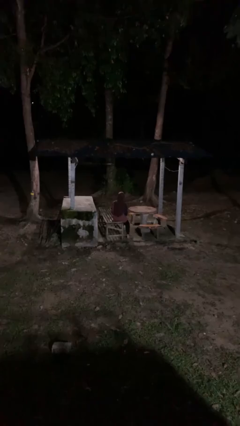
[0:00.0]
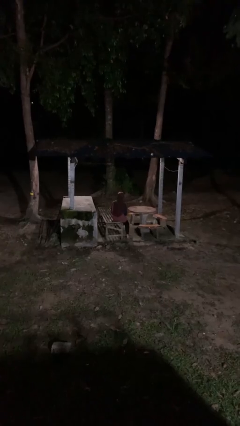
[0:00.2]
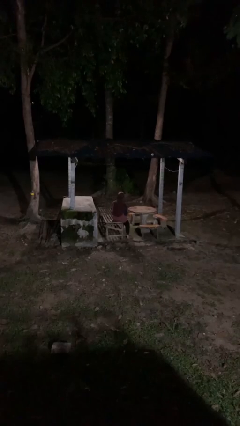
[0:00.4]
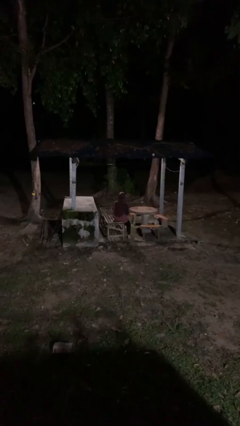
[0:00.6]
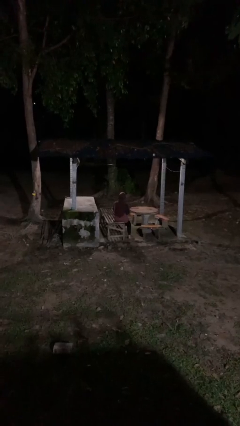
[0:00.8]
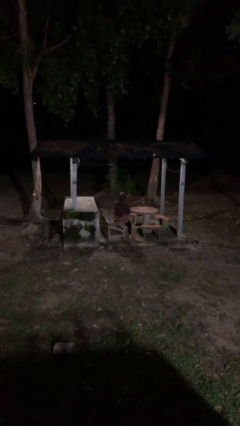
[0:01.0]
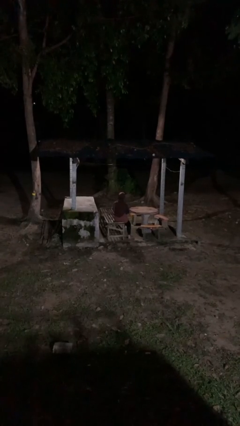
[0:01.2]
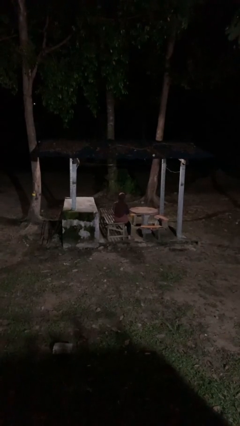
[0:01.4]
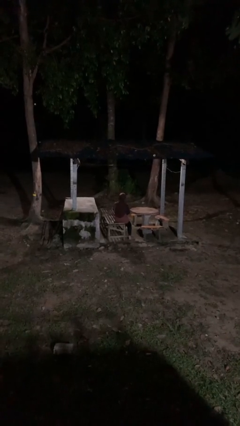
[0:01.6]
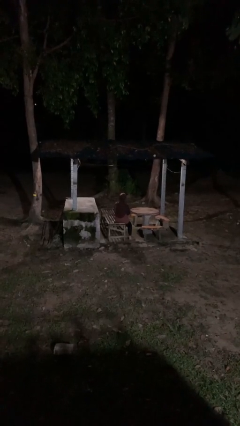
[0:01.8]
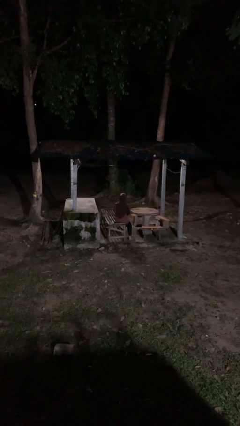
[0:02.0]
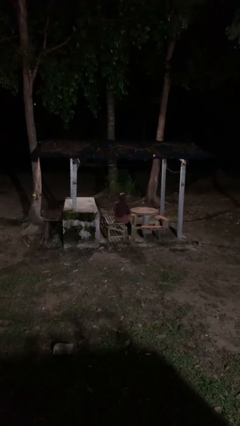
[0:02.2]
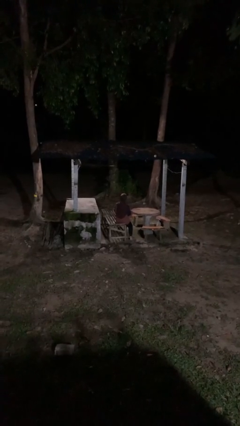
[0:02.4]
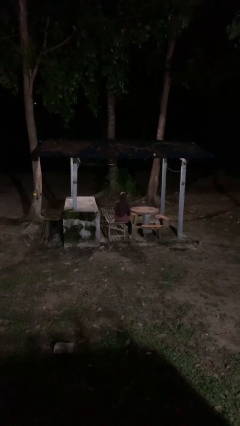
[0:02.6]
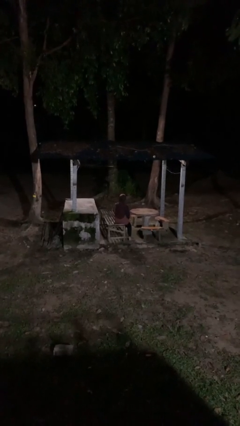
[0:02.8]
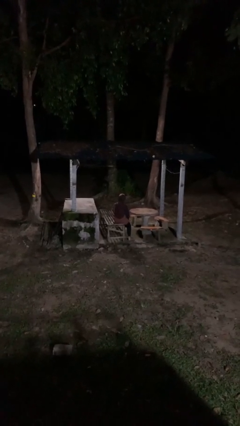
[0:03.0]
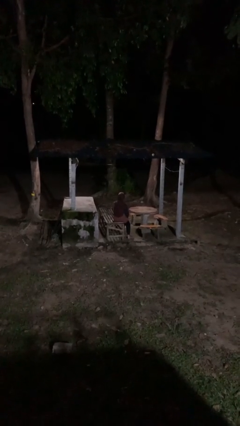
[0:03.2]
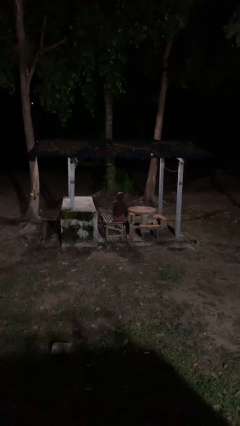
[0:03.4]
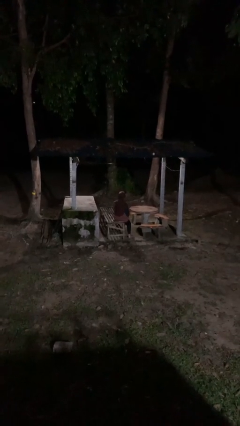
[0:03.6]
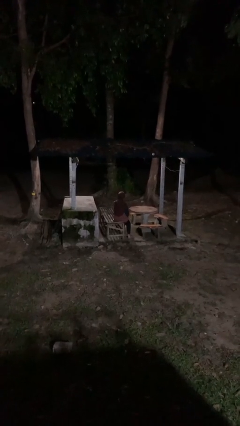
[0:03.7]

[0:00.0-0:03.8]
person paints fingernails

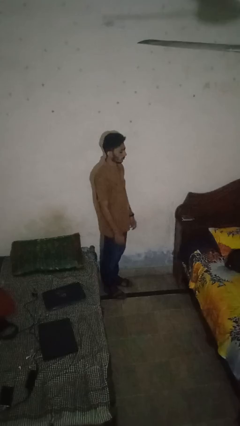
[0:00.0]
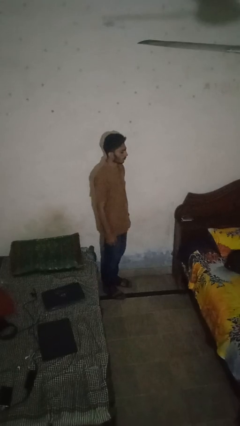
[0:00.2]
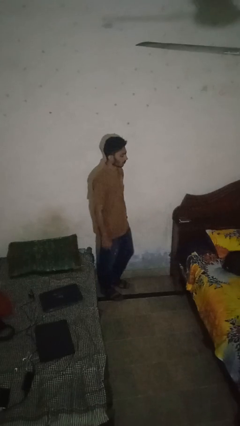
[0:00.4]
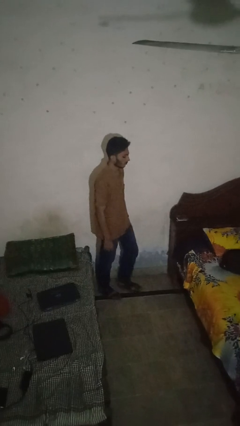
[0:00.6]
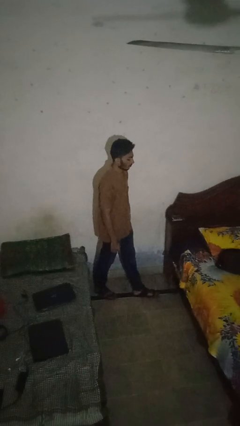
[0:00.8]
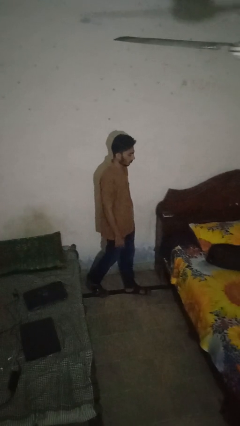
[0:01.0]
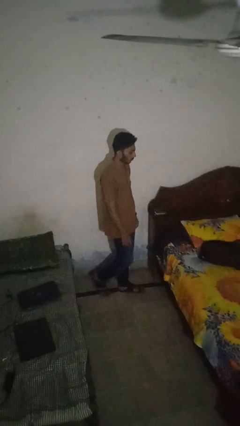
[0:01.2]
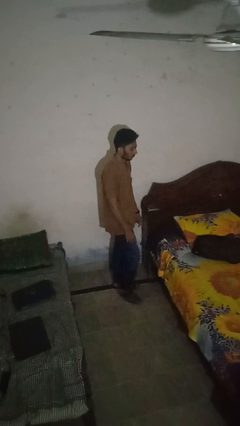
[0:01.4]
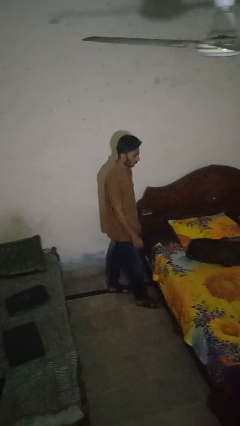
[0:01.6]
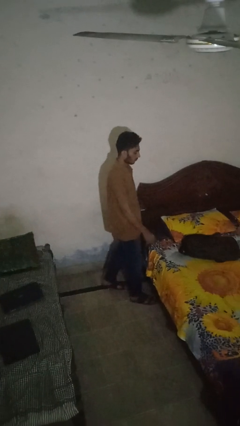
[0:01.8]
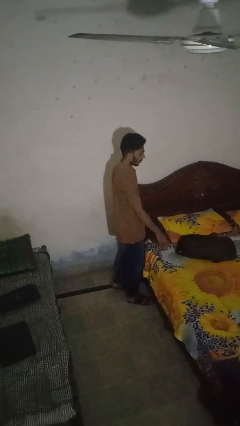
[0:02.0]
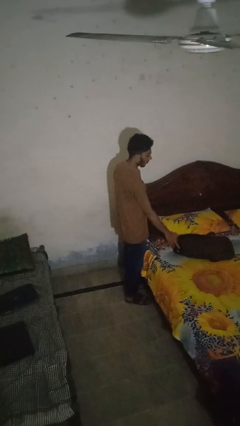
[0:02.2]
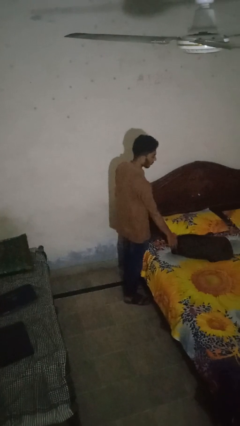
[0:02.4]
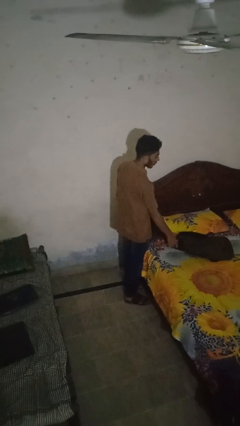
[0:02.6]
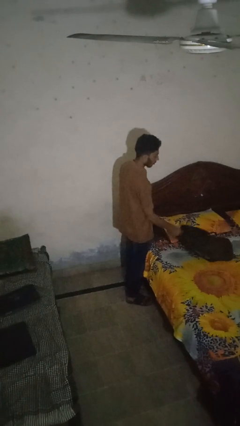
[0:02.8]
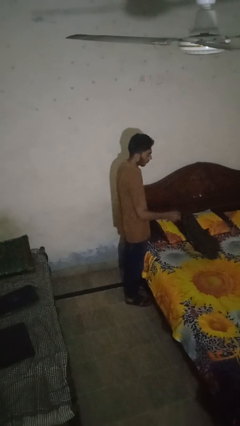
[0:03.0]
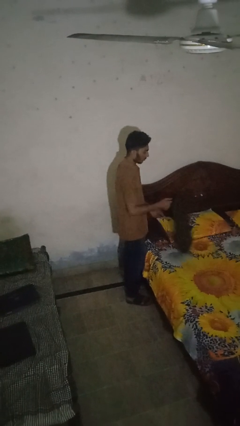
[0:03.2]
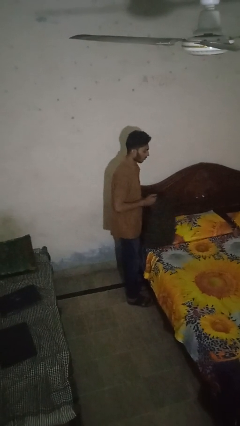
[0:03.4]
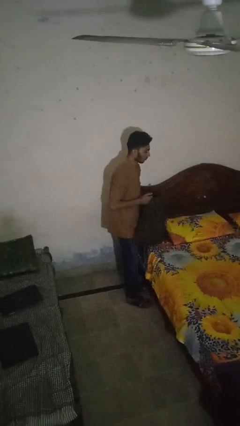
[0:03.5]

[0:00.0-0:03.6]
person picks up object from bed

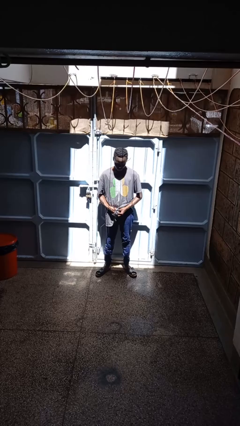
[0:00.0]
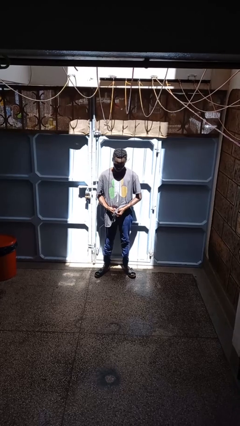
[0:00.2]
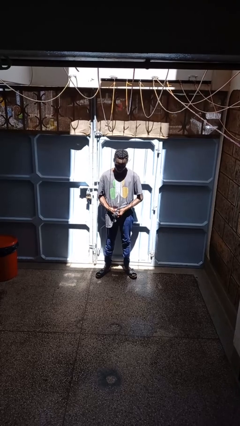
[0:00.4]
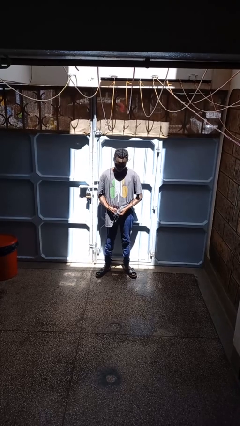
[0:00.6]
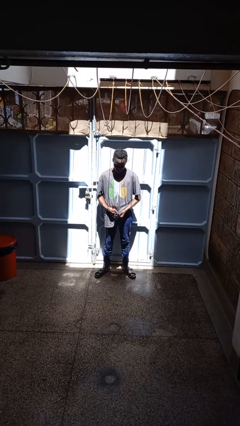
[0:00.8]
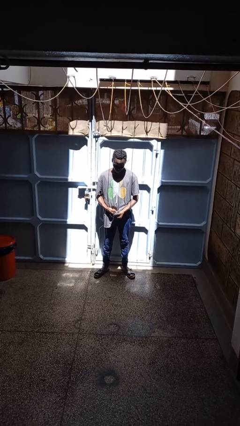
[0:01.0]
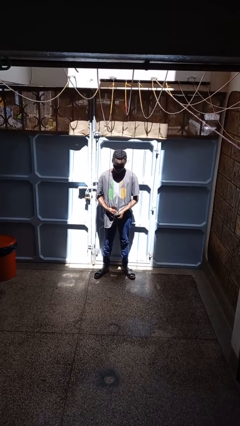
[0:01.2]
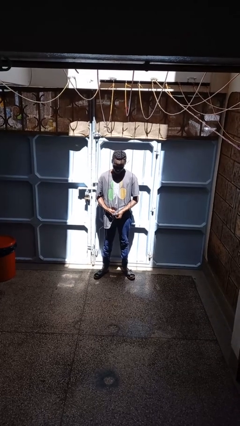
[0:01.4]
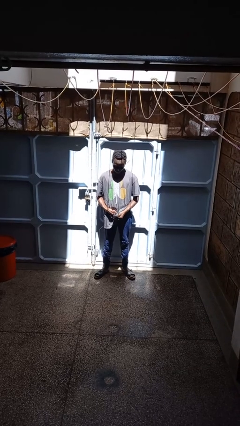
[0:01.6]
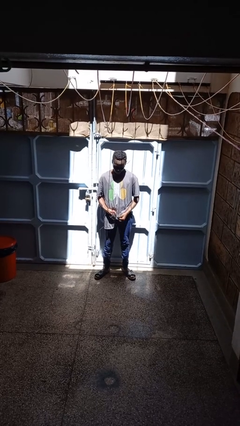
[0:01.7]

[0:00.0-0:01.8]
person cleans eyeglasses

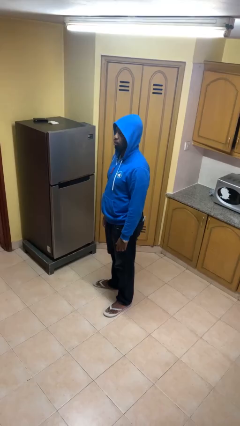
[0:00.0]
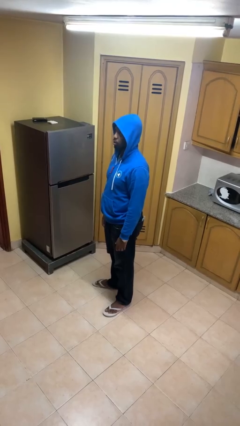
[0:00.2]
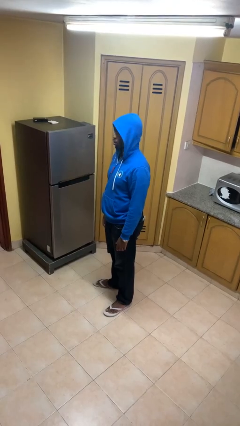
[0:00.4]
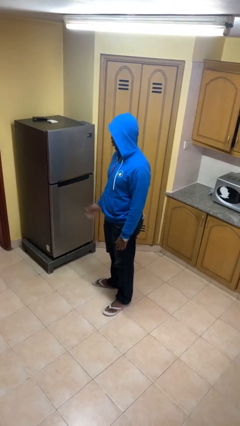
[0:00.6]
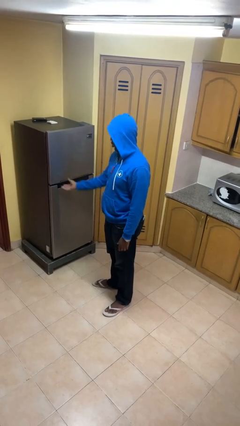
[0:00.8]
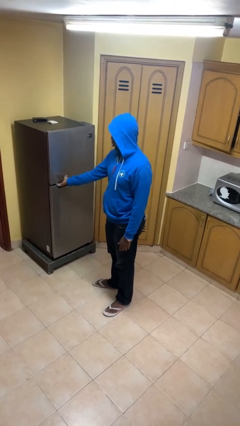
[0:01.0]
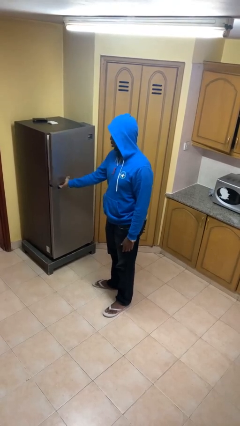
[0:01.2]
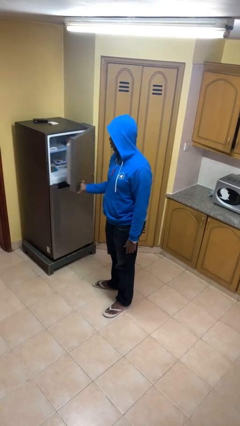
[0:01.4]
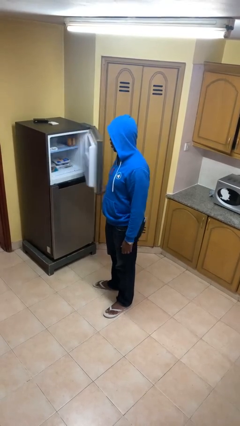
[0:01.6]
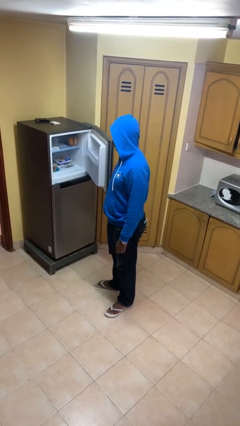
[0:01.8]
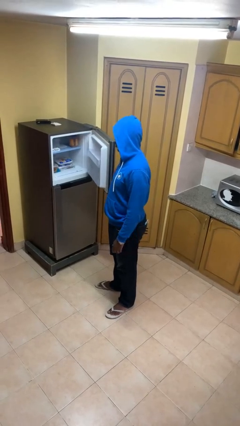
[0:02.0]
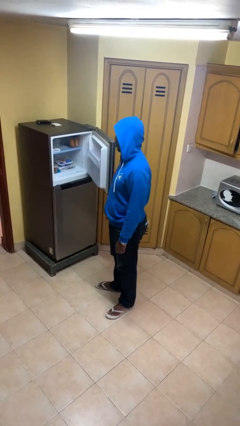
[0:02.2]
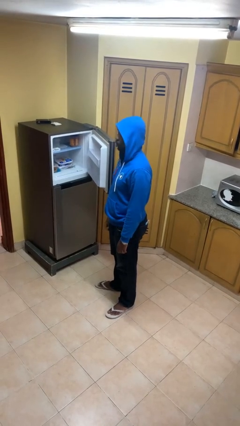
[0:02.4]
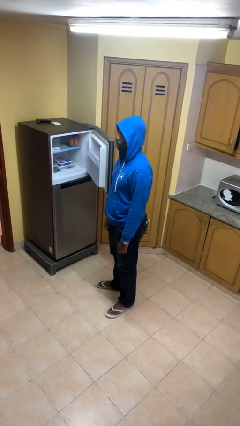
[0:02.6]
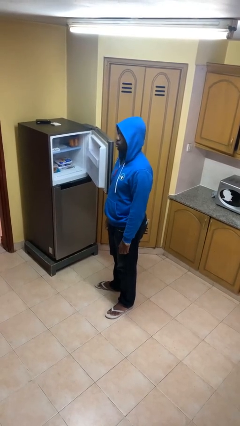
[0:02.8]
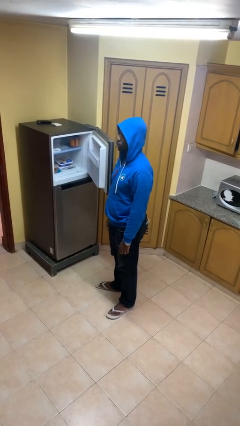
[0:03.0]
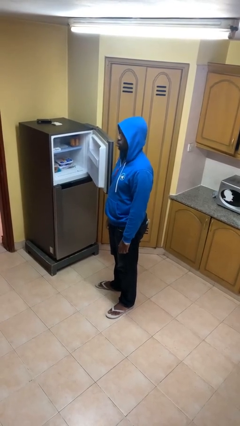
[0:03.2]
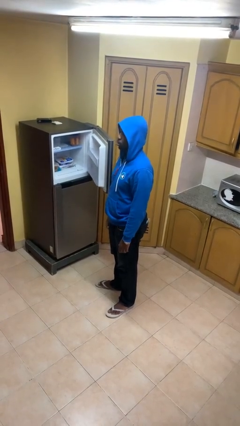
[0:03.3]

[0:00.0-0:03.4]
person opens refrigerator

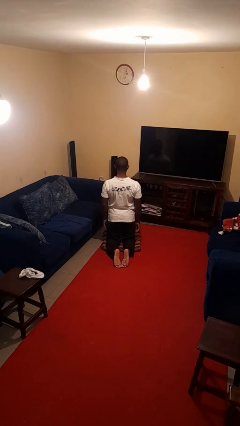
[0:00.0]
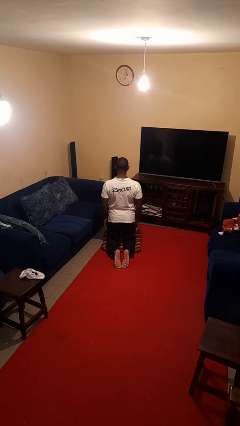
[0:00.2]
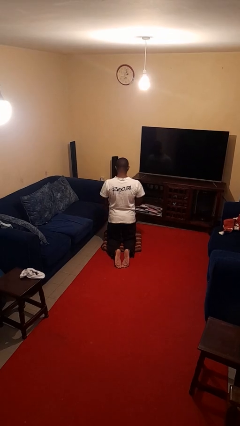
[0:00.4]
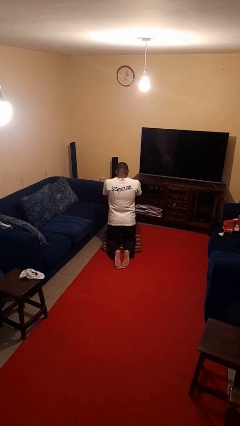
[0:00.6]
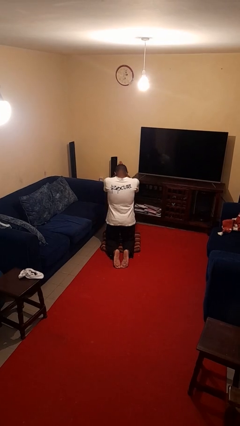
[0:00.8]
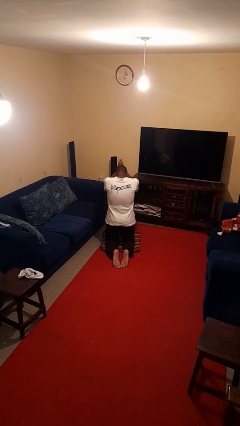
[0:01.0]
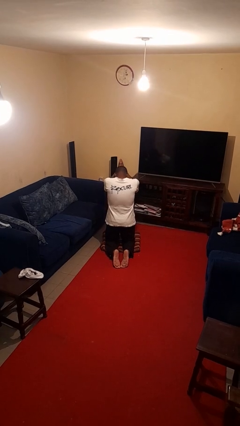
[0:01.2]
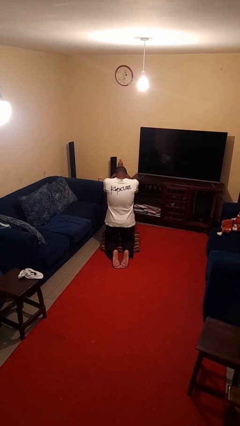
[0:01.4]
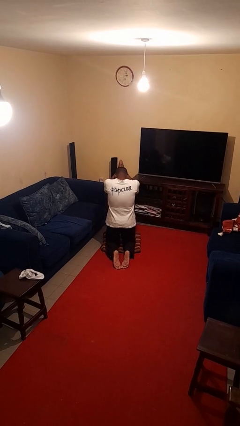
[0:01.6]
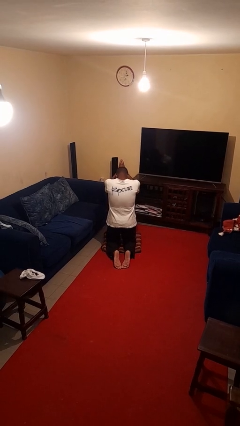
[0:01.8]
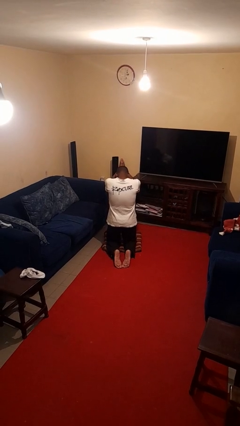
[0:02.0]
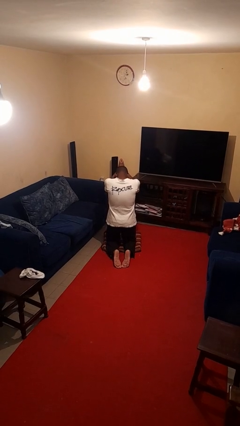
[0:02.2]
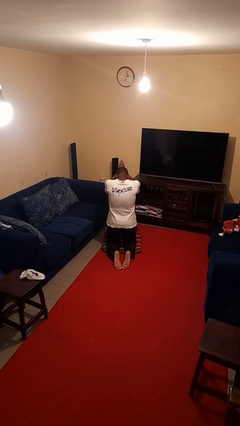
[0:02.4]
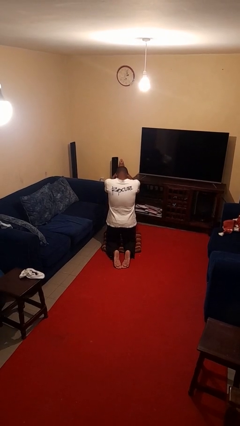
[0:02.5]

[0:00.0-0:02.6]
person prays

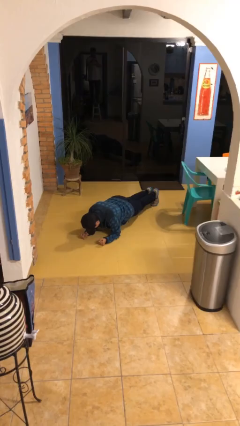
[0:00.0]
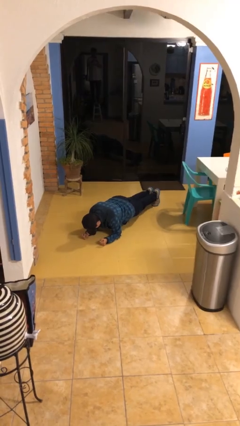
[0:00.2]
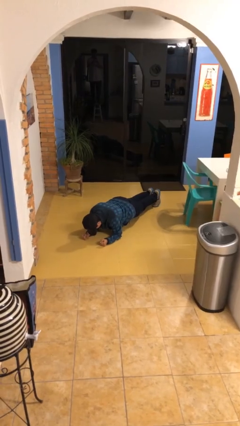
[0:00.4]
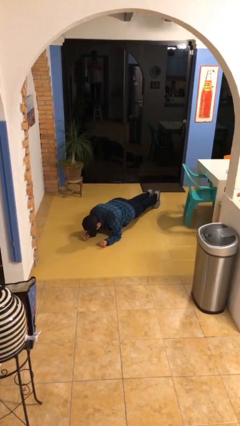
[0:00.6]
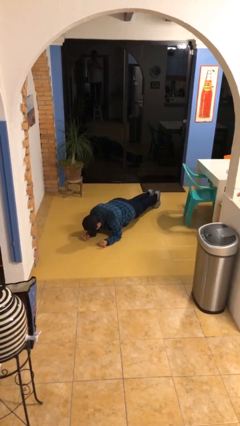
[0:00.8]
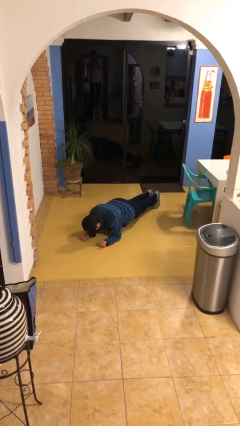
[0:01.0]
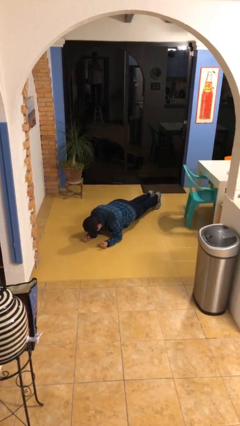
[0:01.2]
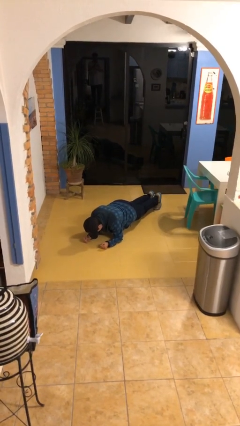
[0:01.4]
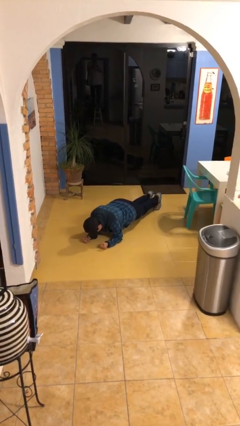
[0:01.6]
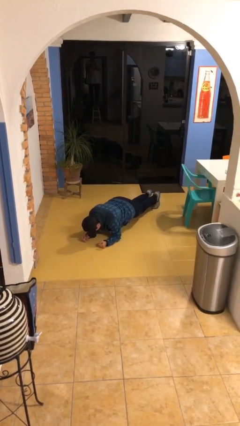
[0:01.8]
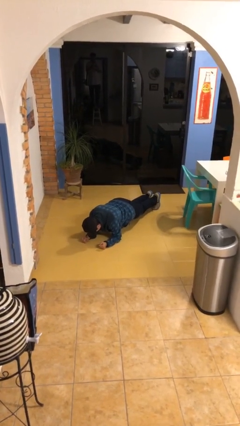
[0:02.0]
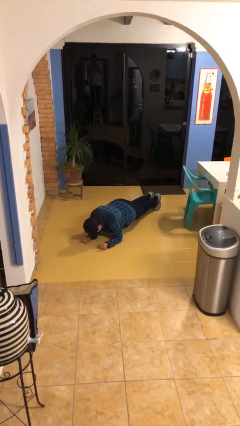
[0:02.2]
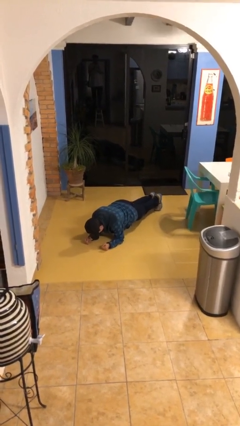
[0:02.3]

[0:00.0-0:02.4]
person exercises with plank

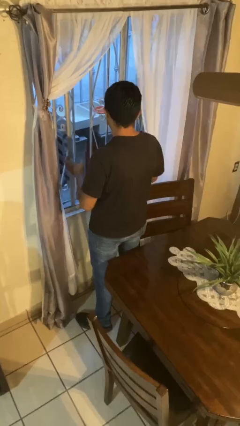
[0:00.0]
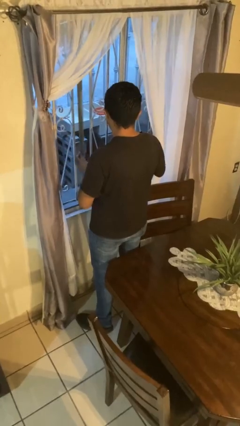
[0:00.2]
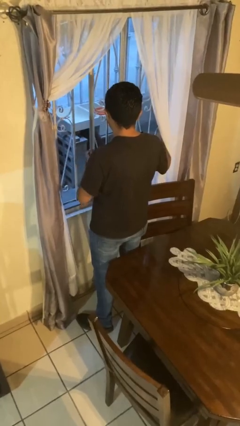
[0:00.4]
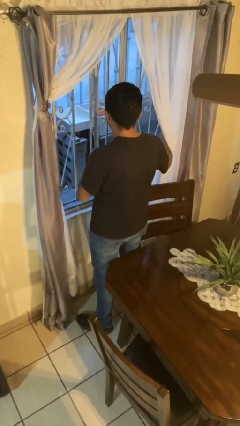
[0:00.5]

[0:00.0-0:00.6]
person opens home window
